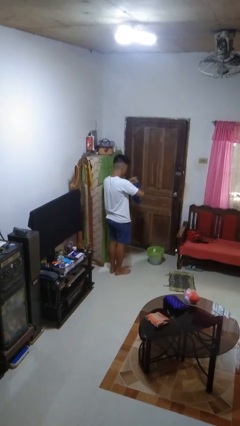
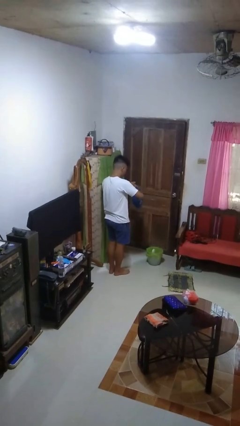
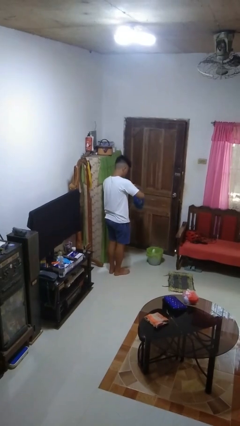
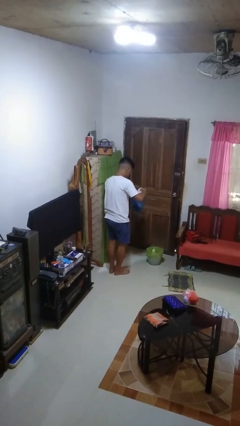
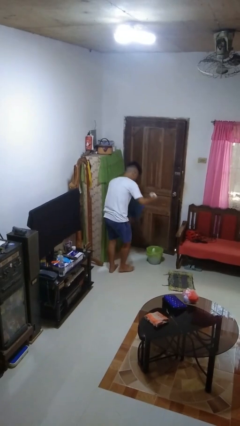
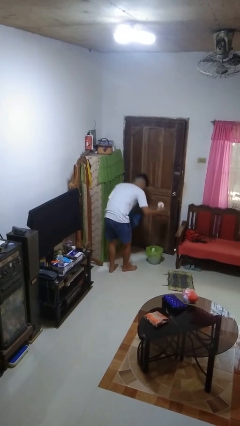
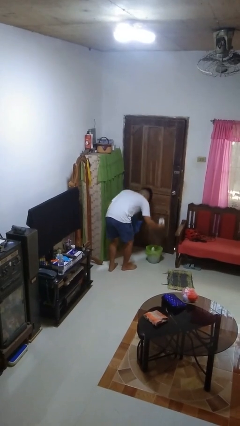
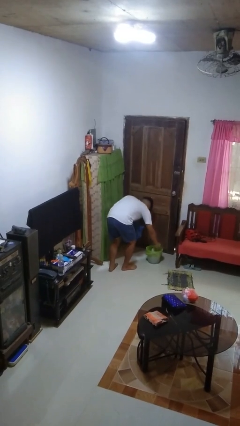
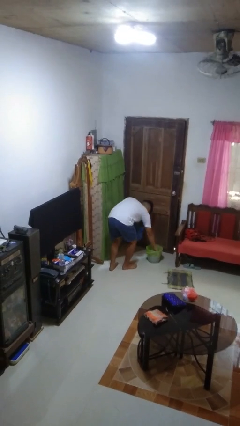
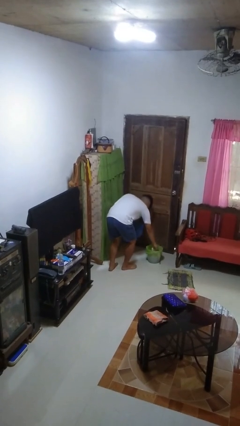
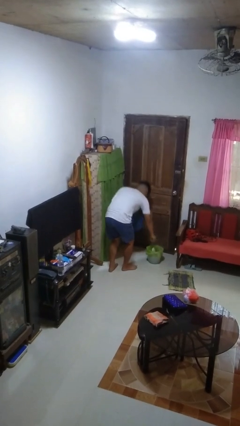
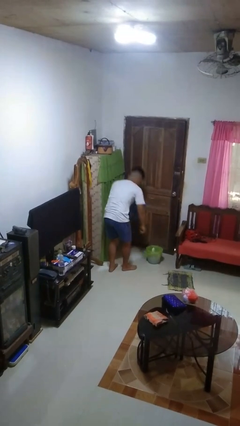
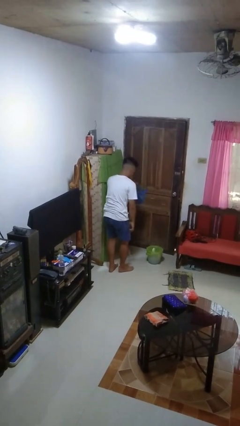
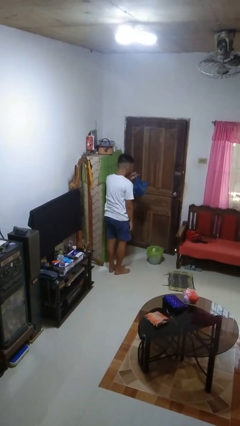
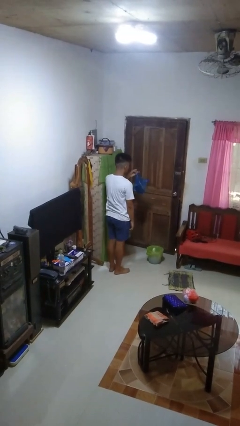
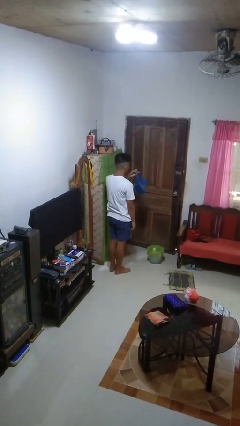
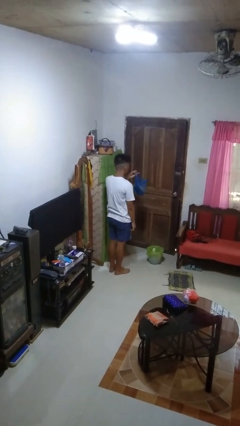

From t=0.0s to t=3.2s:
person discards trash

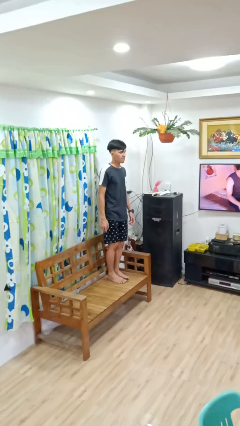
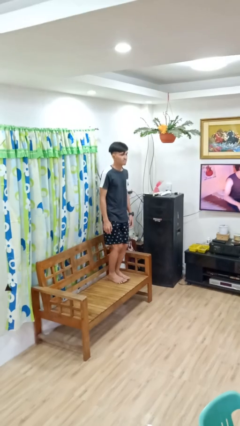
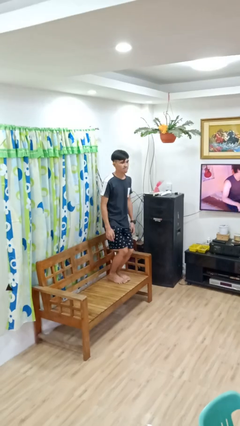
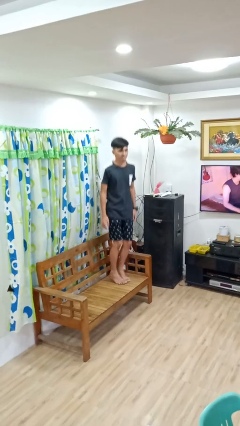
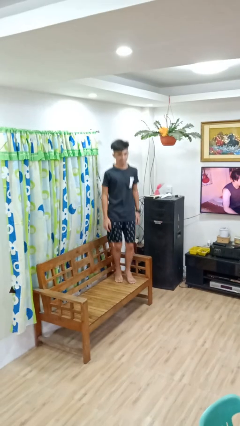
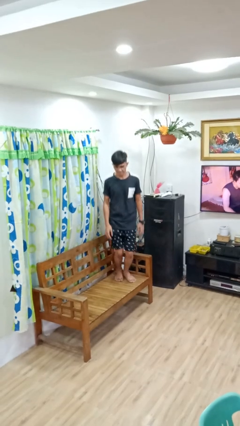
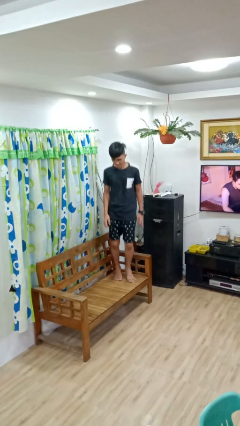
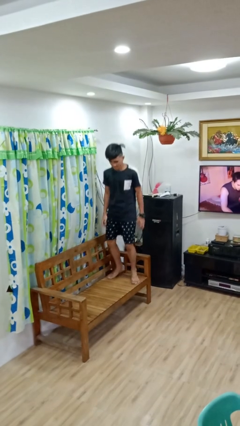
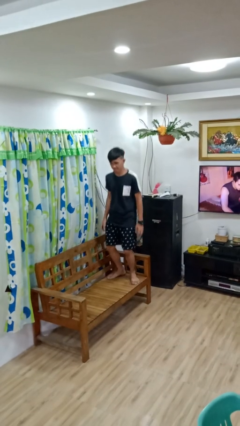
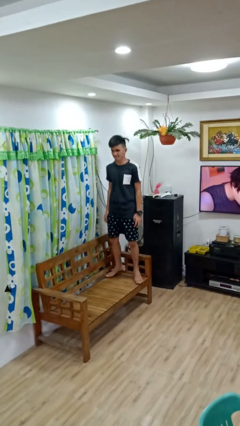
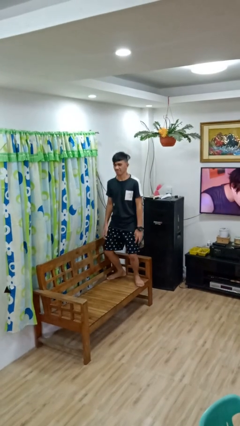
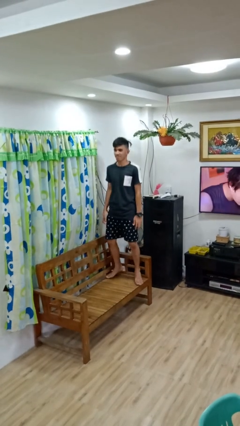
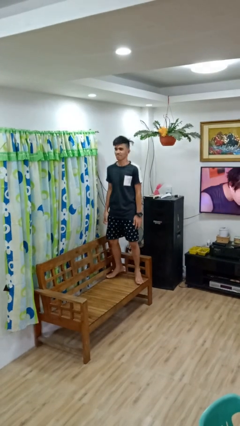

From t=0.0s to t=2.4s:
person jumps on couch

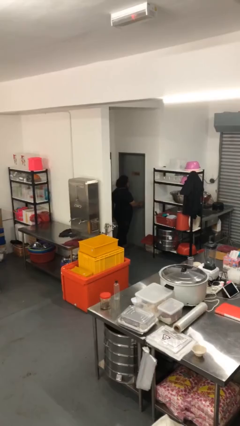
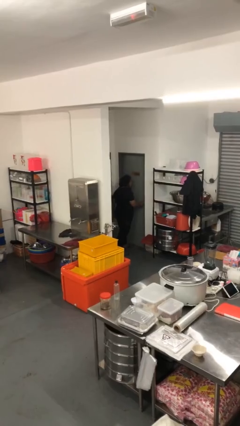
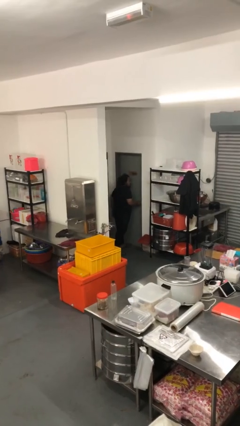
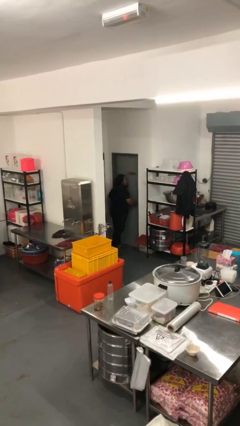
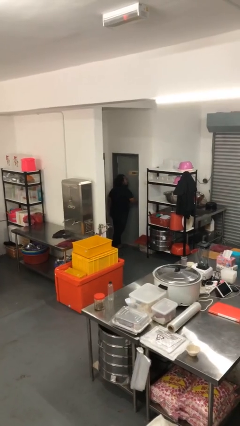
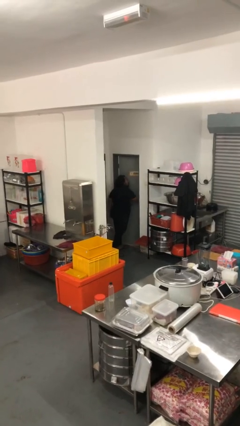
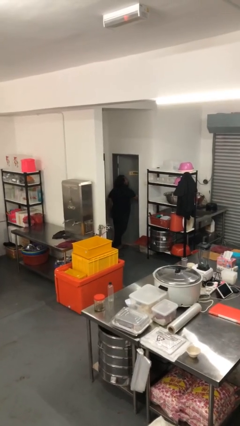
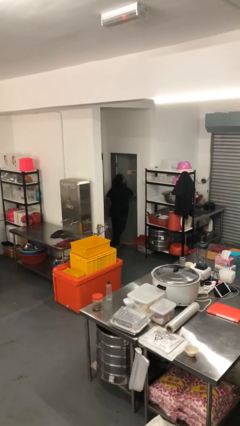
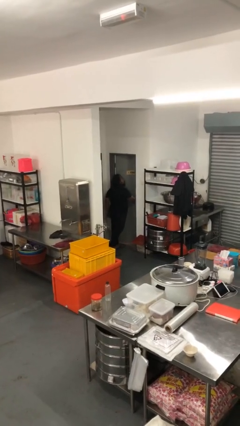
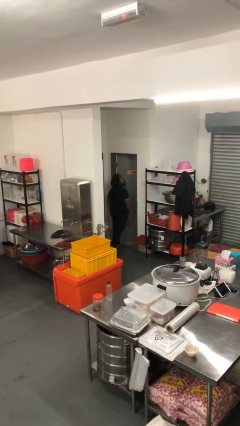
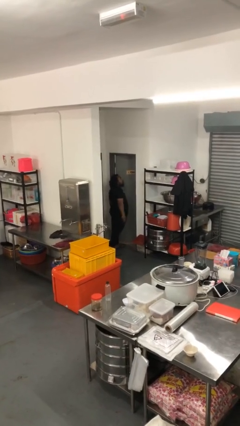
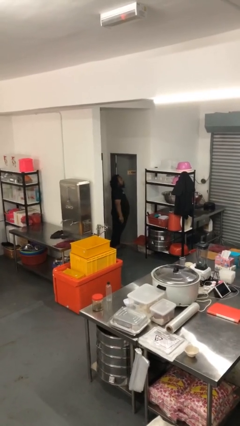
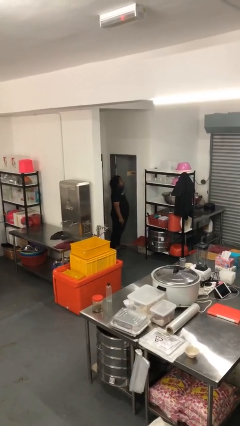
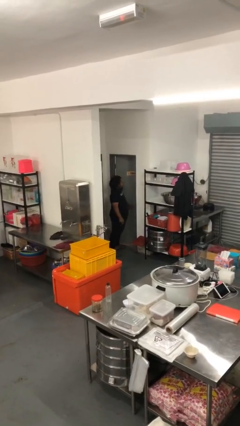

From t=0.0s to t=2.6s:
person opens facility door

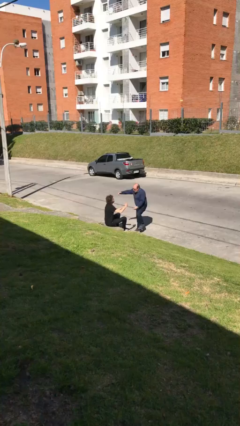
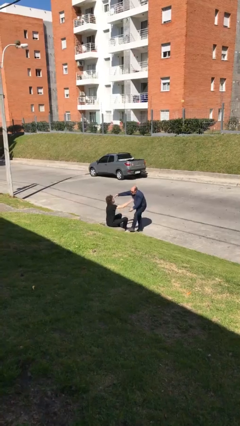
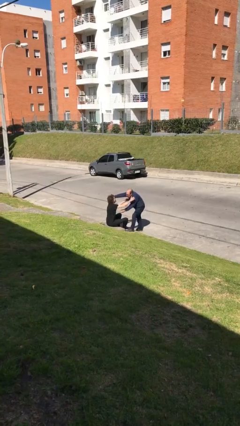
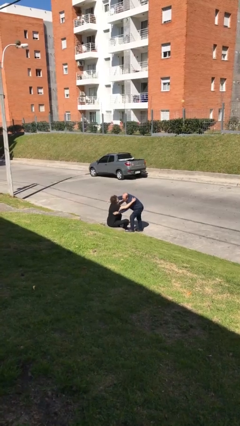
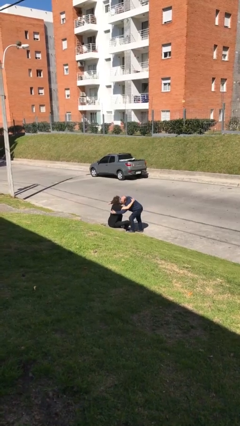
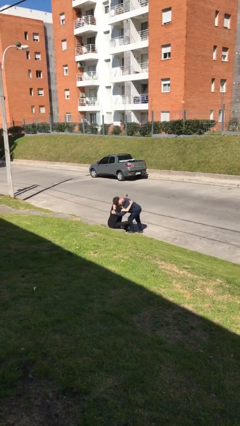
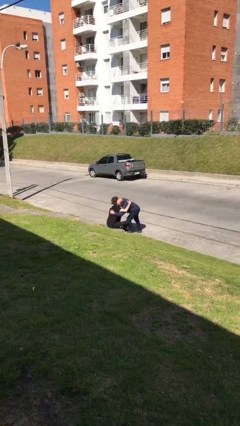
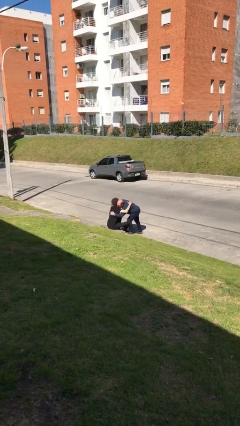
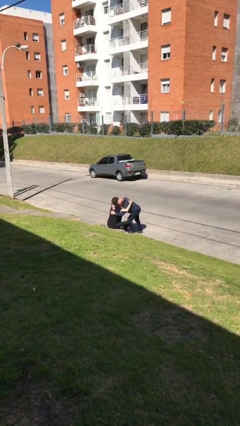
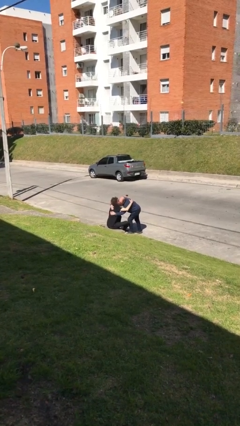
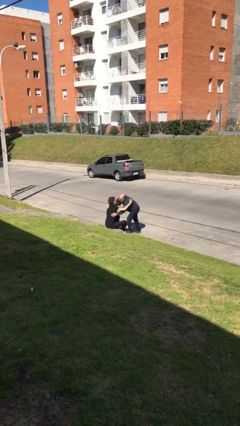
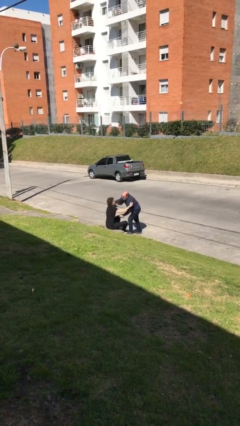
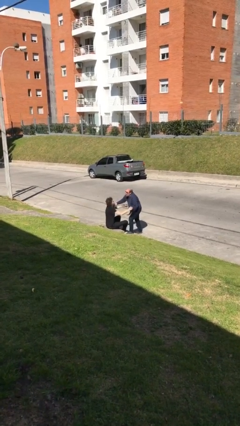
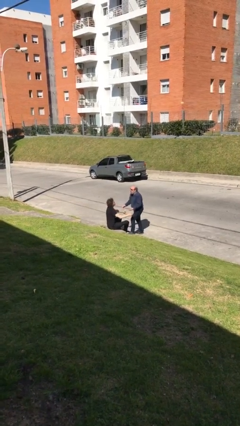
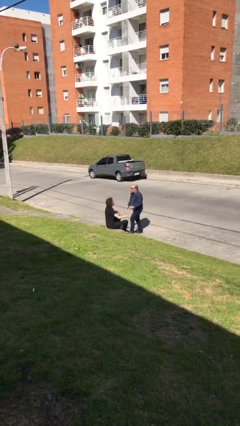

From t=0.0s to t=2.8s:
person embraces person

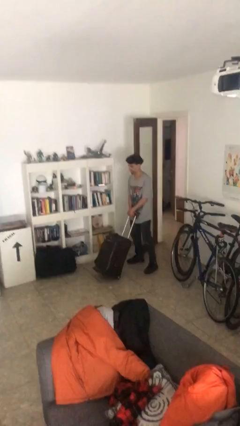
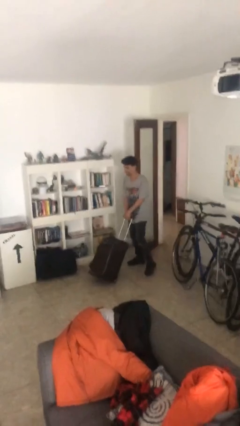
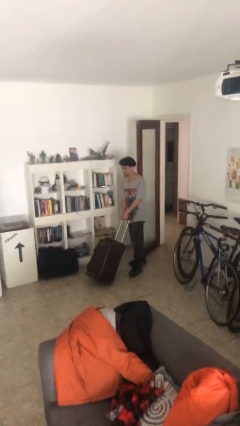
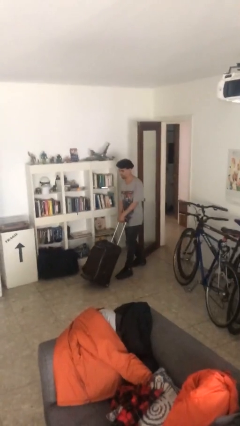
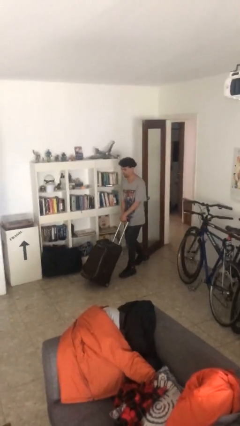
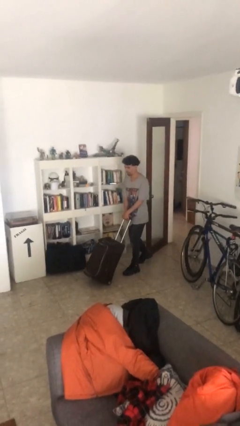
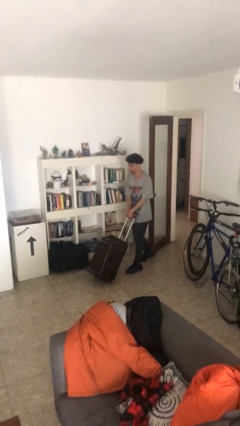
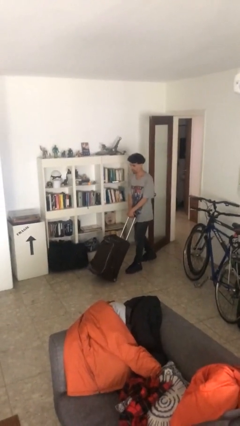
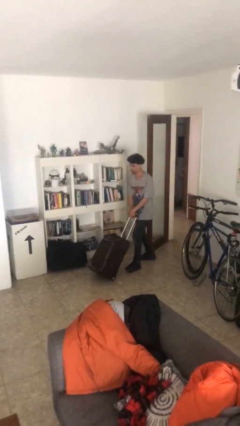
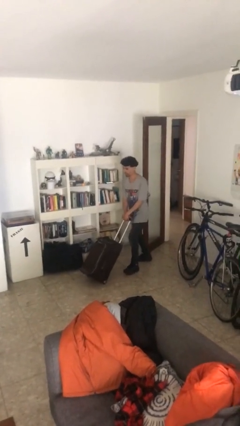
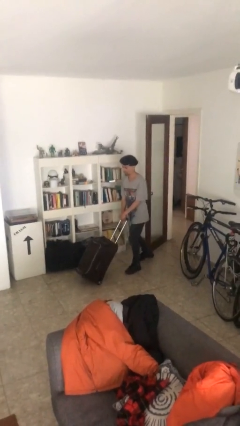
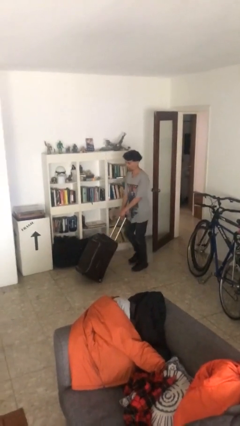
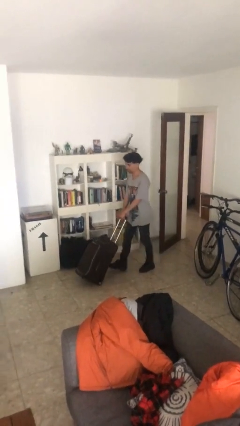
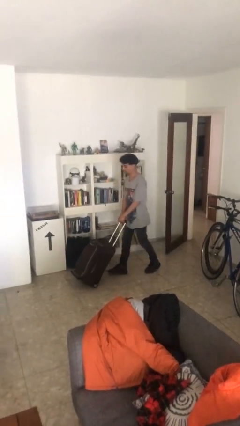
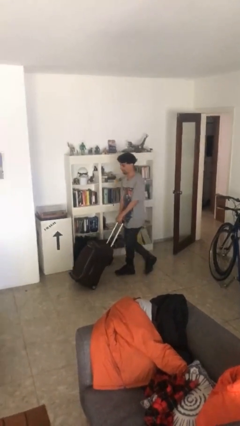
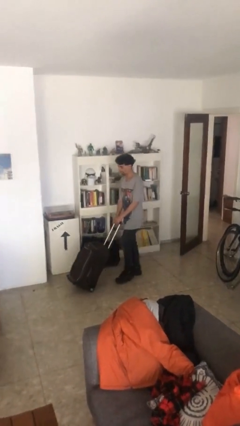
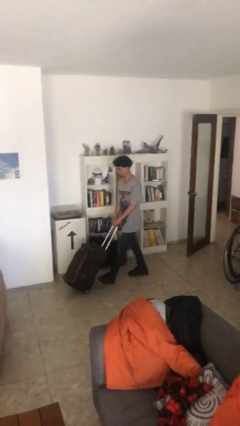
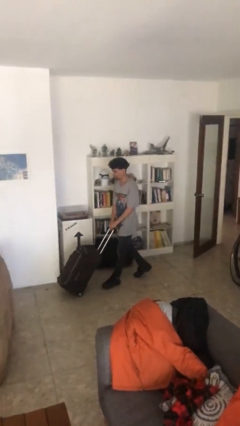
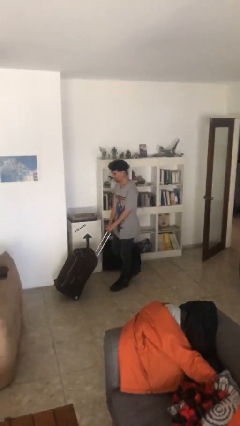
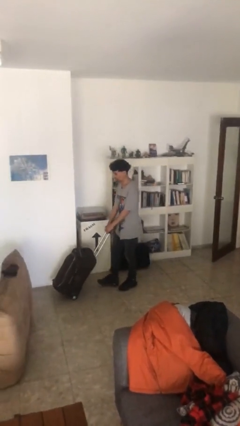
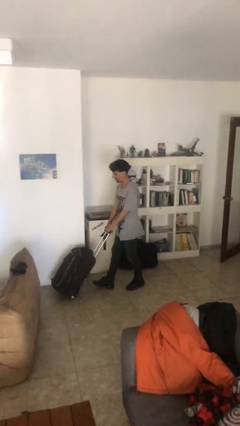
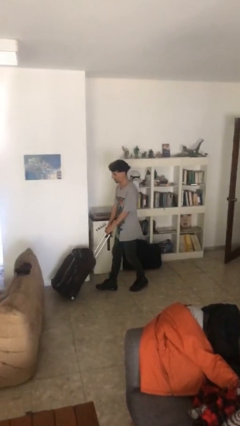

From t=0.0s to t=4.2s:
person pushes wheeled cart

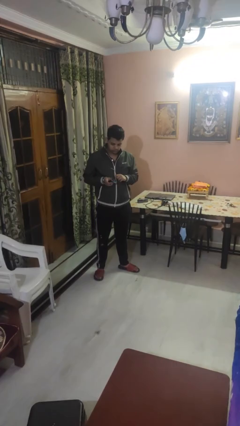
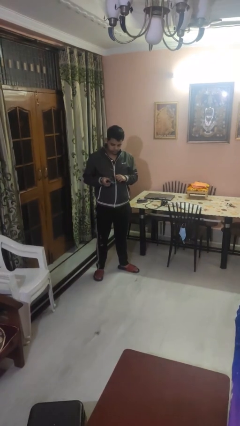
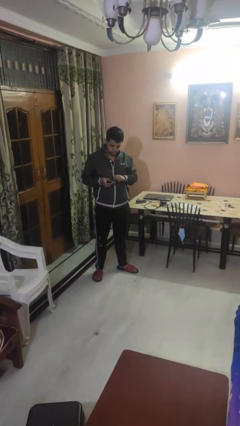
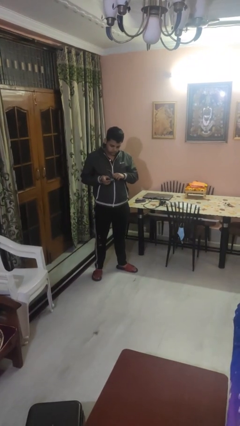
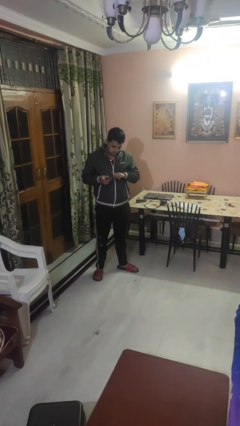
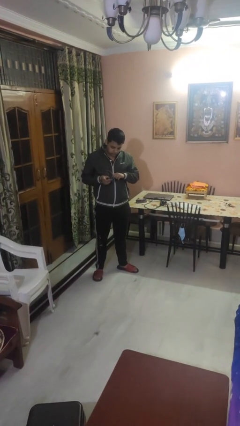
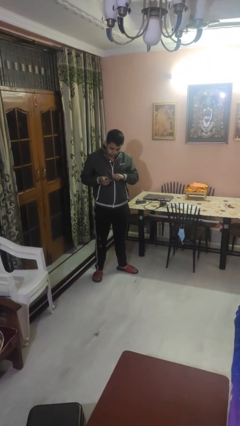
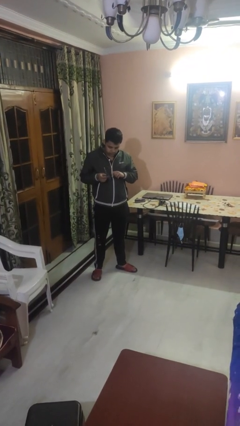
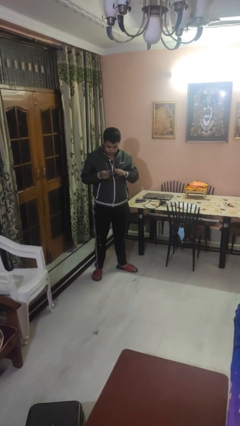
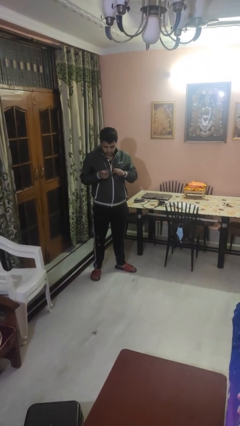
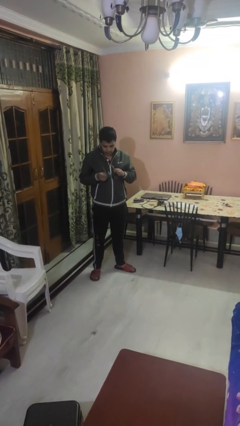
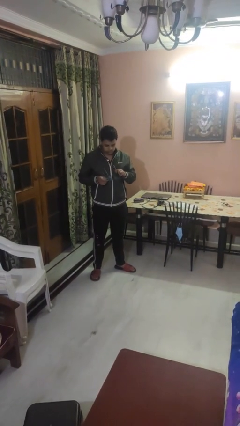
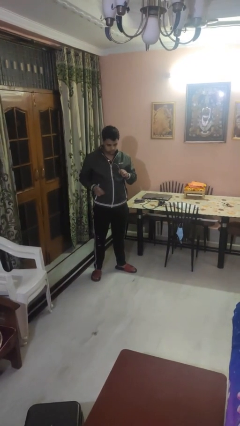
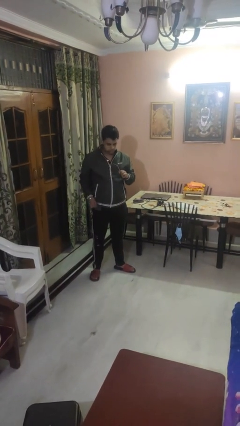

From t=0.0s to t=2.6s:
person cleans eyeglasses
